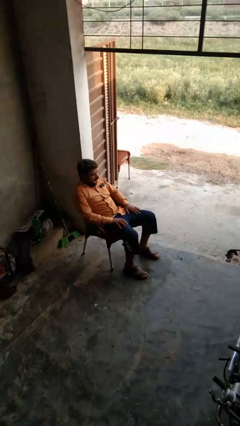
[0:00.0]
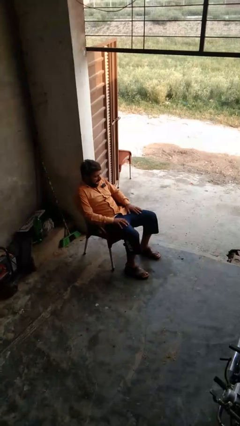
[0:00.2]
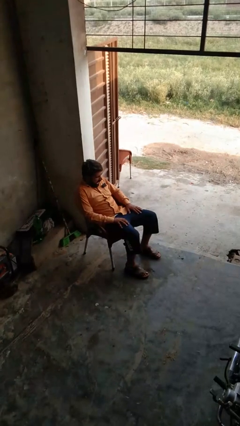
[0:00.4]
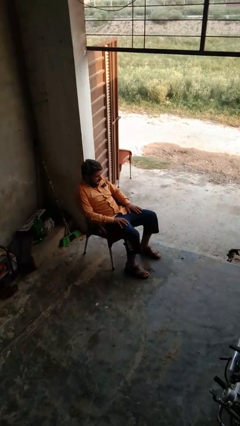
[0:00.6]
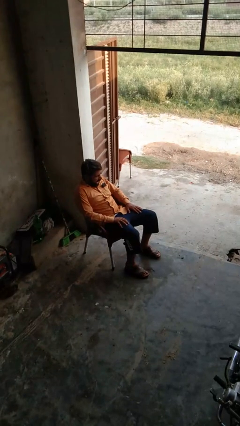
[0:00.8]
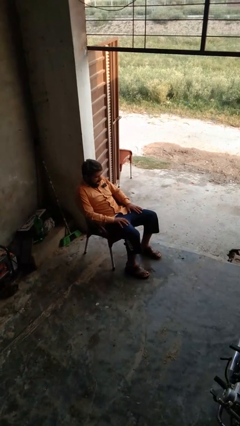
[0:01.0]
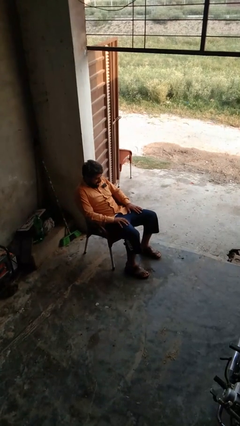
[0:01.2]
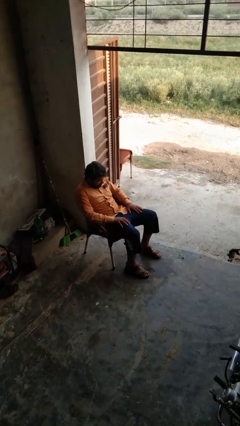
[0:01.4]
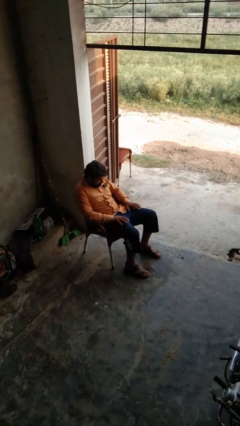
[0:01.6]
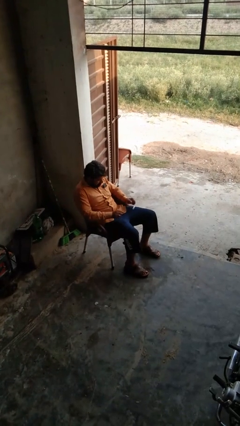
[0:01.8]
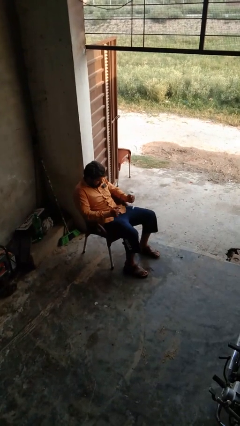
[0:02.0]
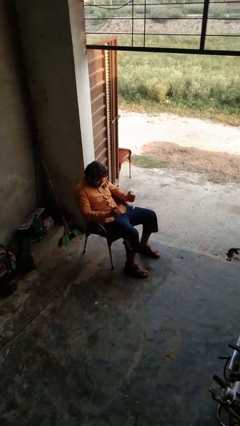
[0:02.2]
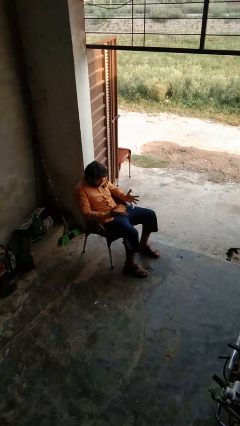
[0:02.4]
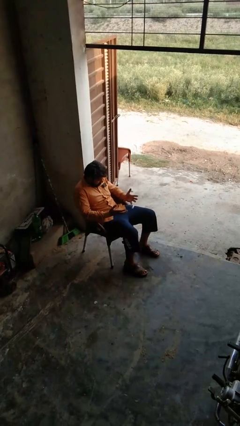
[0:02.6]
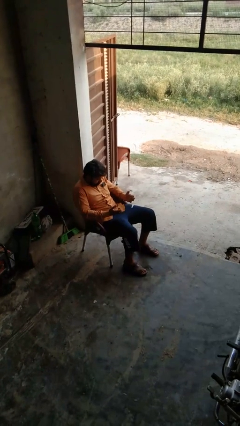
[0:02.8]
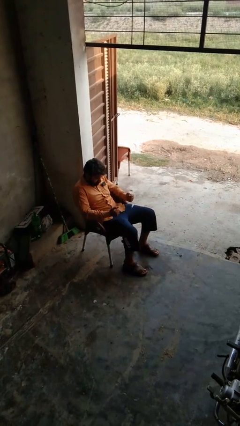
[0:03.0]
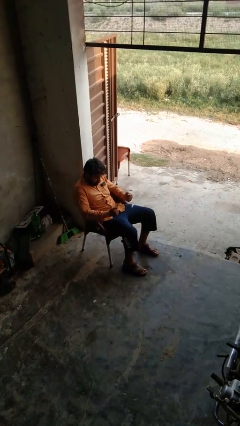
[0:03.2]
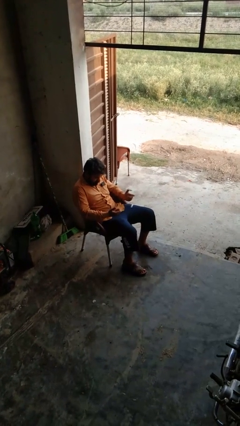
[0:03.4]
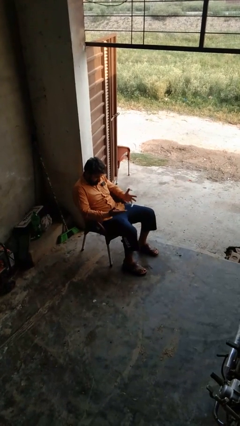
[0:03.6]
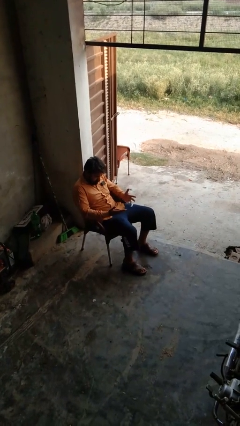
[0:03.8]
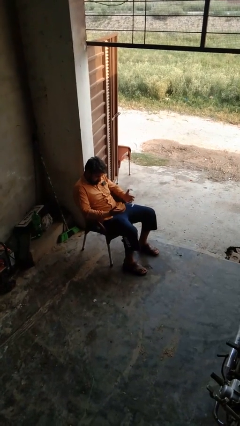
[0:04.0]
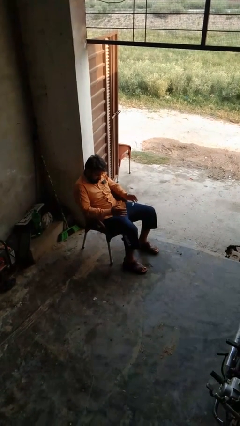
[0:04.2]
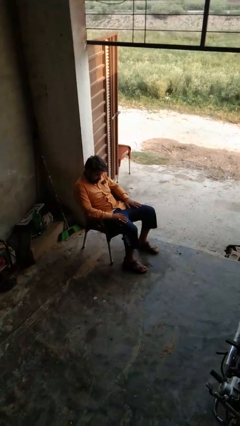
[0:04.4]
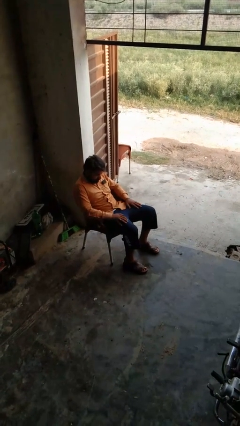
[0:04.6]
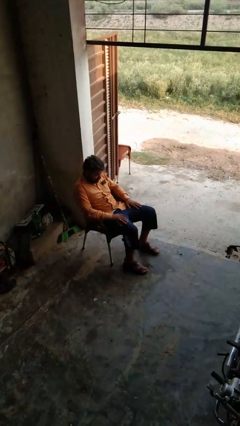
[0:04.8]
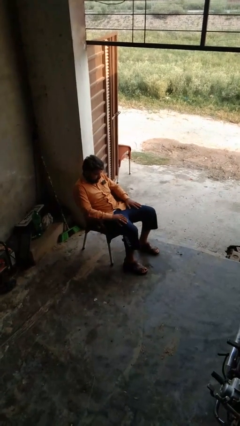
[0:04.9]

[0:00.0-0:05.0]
person looks at hands in lap

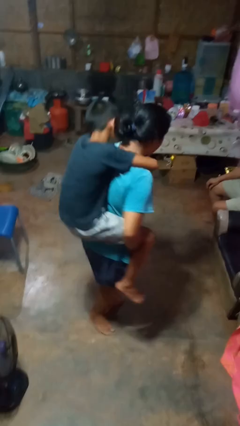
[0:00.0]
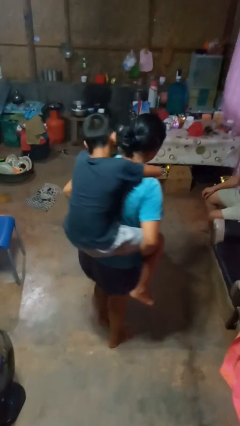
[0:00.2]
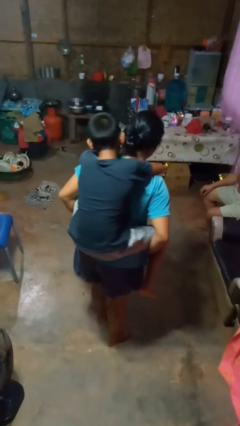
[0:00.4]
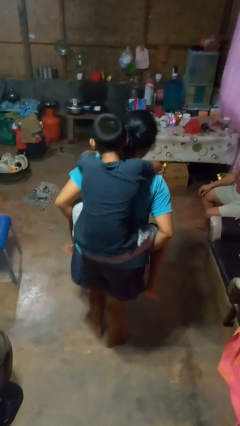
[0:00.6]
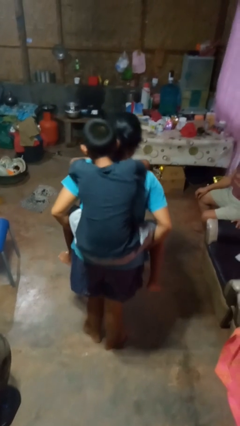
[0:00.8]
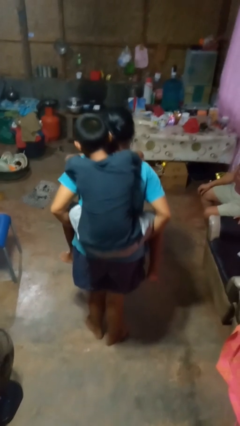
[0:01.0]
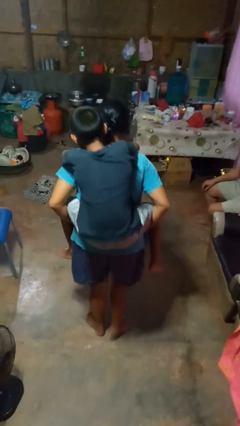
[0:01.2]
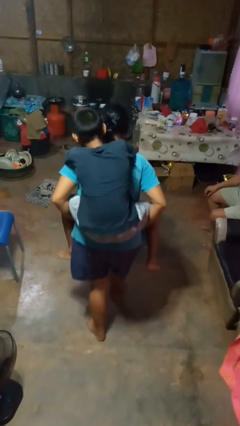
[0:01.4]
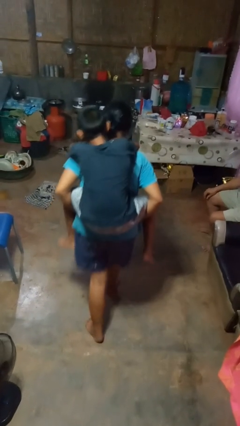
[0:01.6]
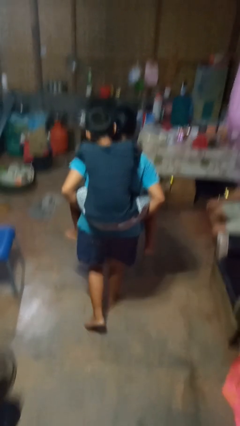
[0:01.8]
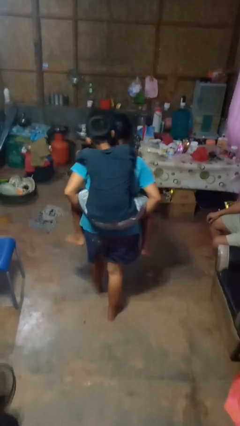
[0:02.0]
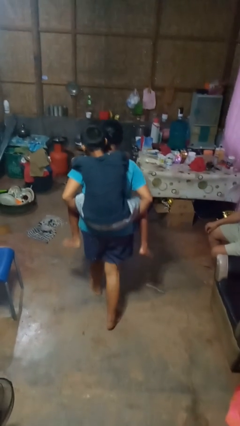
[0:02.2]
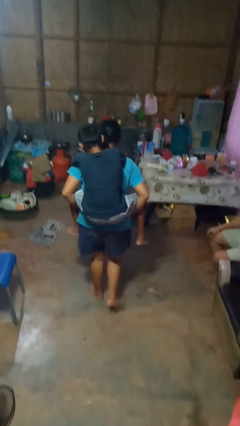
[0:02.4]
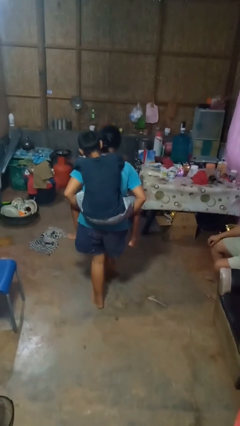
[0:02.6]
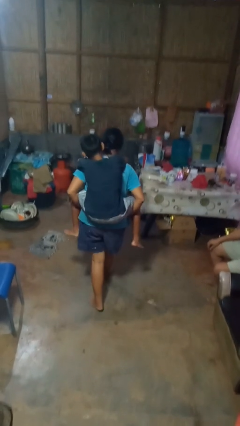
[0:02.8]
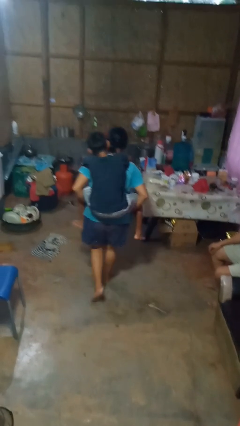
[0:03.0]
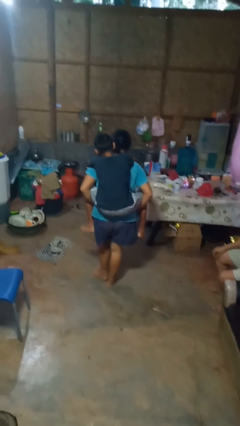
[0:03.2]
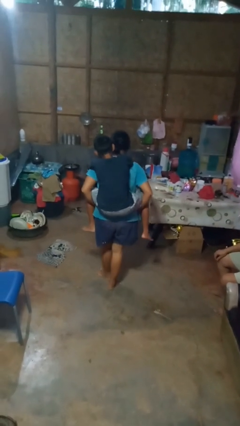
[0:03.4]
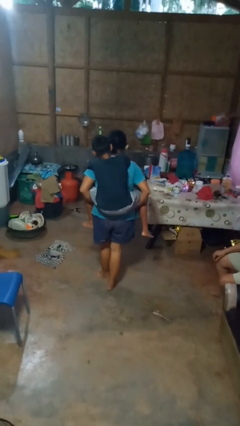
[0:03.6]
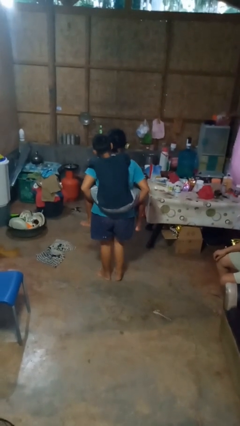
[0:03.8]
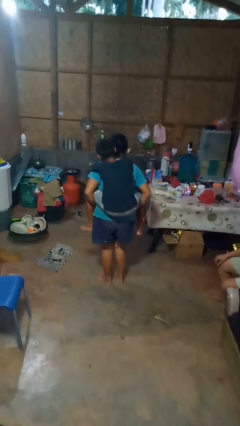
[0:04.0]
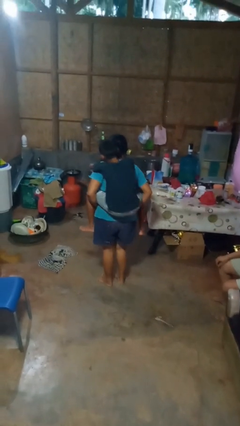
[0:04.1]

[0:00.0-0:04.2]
person carries person on back

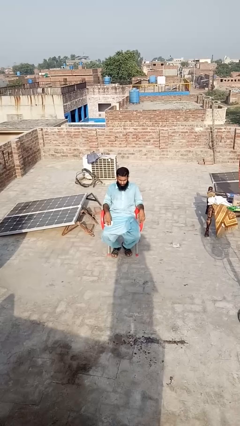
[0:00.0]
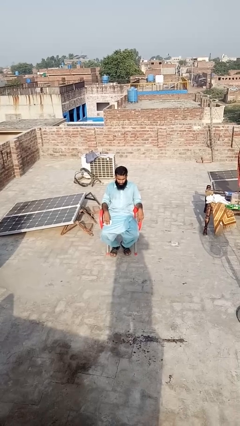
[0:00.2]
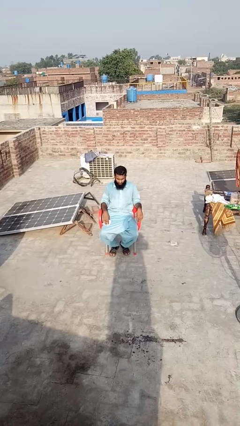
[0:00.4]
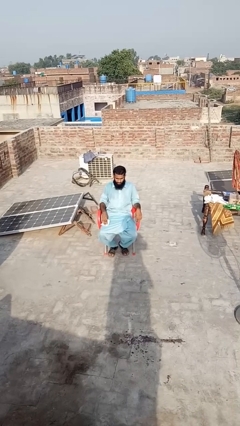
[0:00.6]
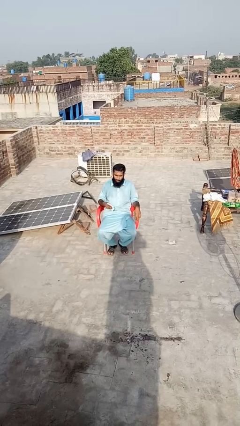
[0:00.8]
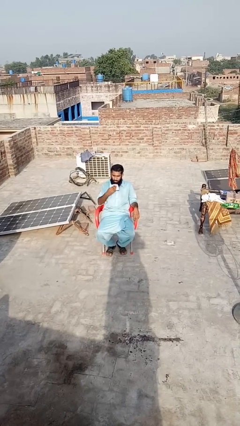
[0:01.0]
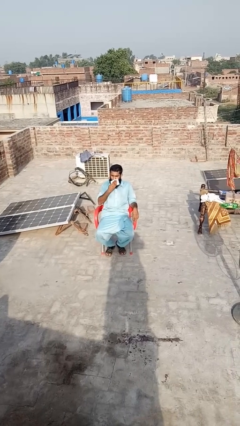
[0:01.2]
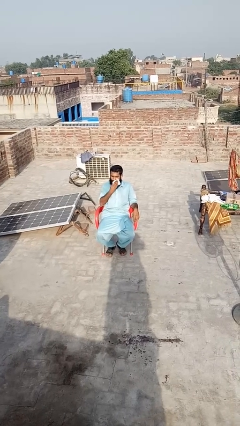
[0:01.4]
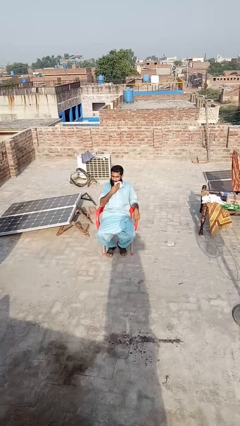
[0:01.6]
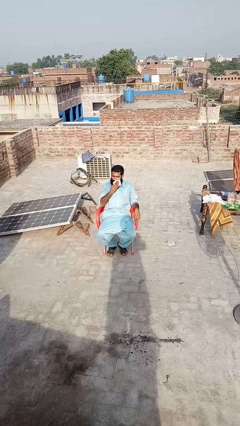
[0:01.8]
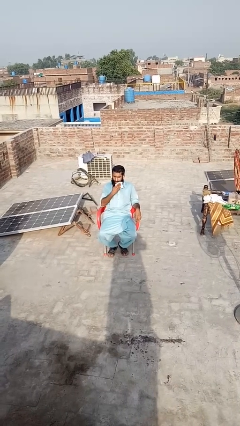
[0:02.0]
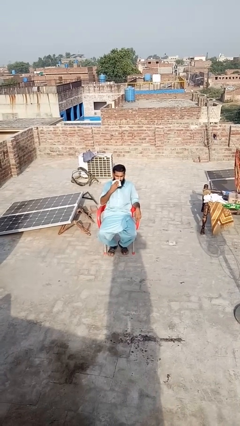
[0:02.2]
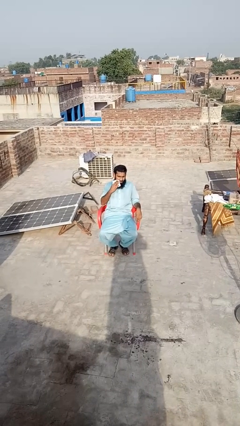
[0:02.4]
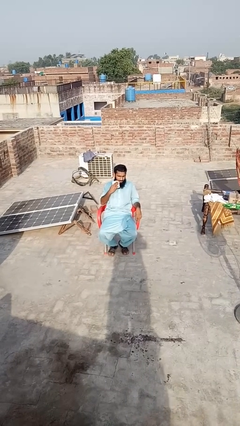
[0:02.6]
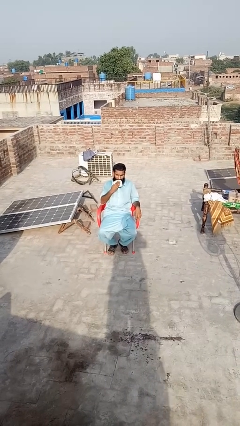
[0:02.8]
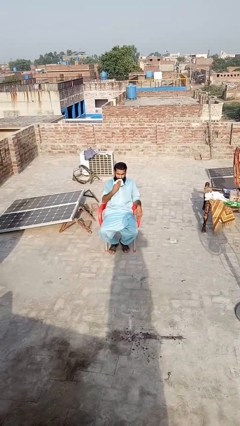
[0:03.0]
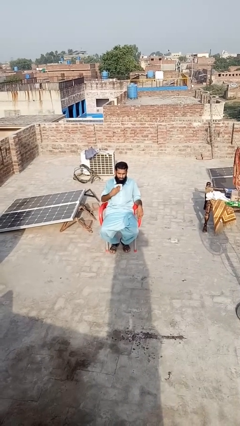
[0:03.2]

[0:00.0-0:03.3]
person wipes mouth with napkin

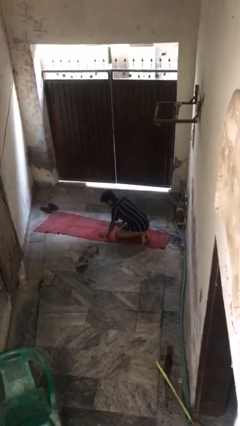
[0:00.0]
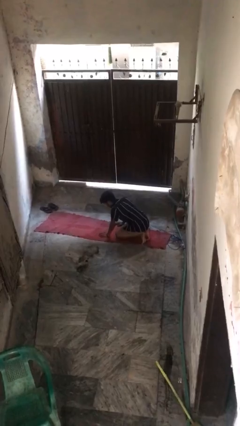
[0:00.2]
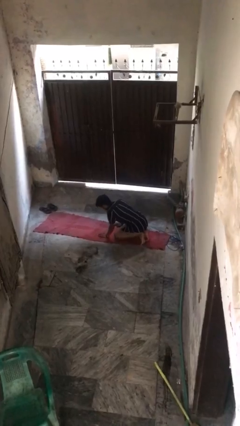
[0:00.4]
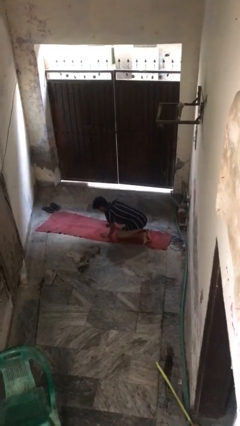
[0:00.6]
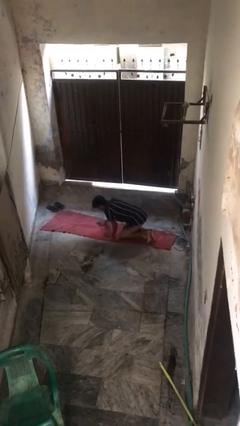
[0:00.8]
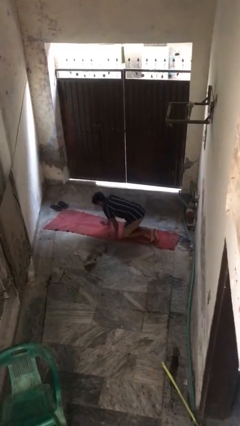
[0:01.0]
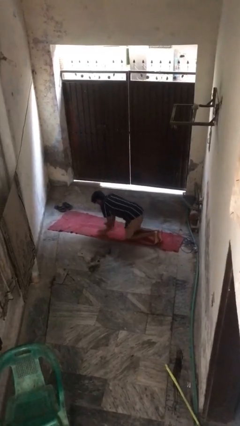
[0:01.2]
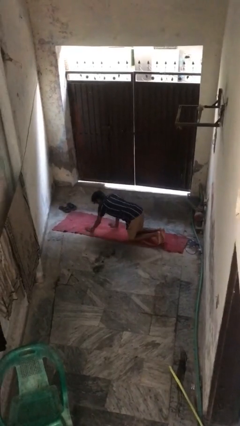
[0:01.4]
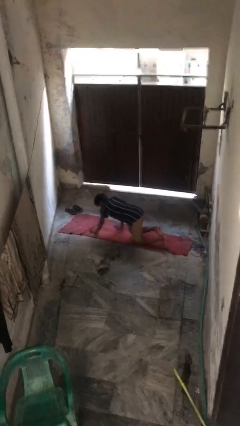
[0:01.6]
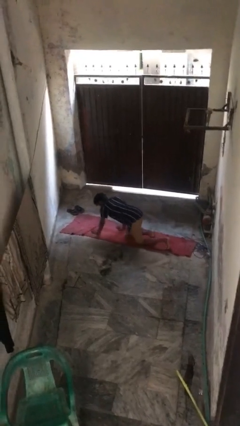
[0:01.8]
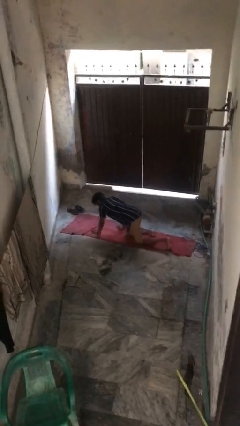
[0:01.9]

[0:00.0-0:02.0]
person crawls

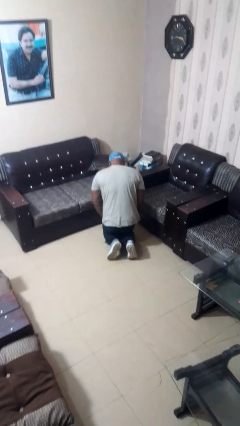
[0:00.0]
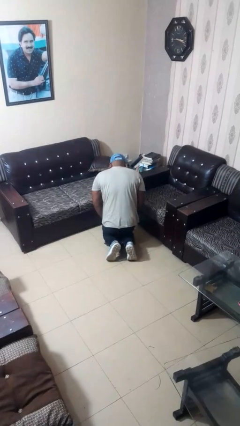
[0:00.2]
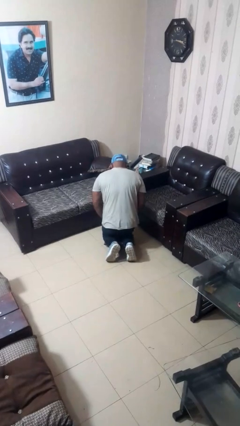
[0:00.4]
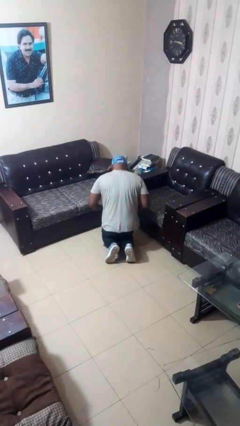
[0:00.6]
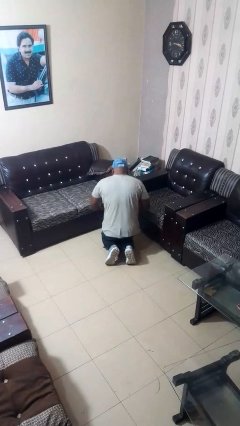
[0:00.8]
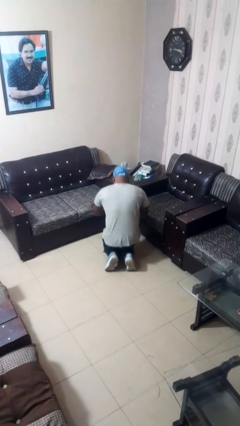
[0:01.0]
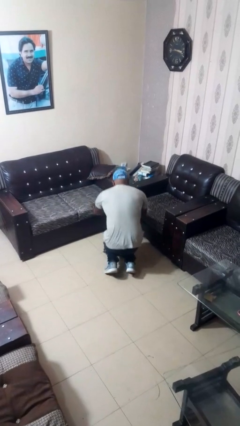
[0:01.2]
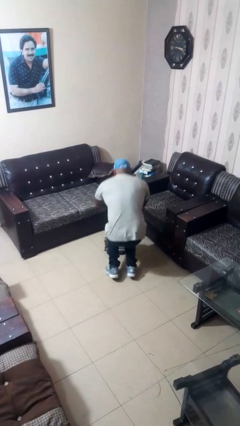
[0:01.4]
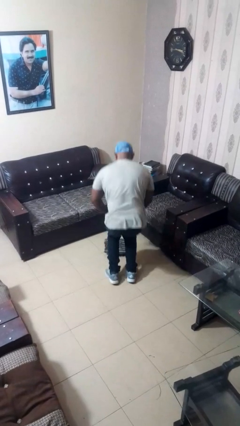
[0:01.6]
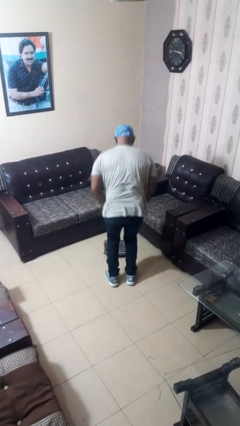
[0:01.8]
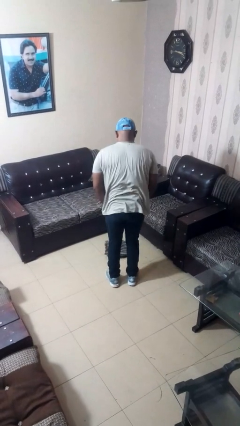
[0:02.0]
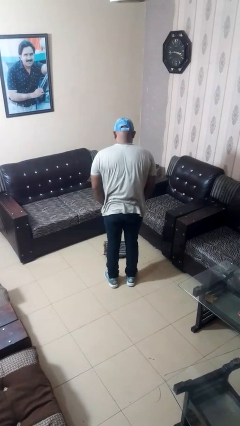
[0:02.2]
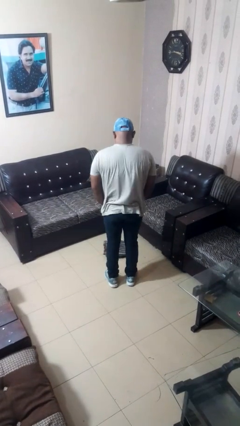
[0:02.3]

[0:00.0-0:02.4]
person stands up from floor

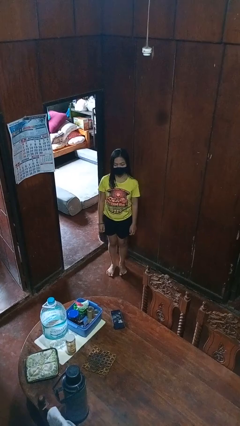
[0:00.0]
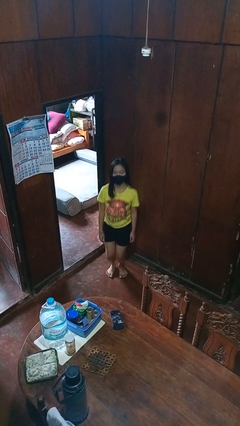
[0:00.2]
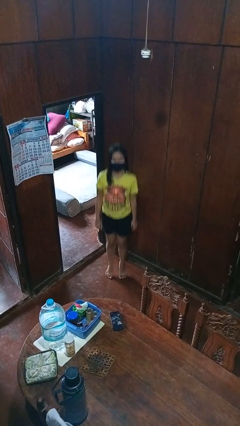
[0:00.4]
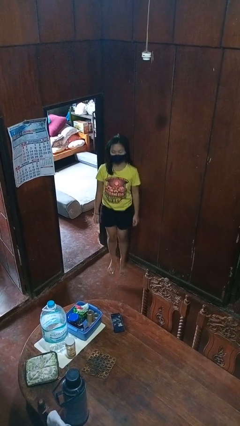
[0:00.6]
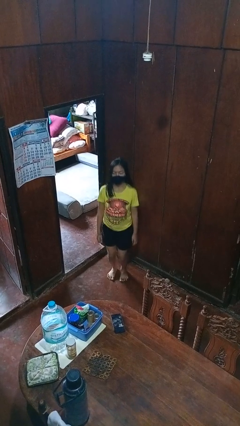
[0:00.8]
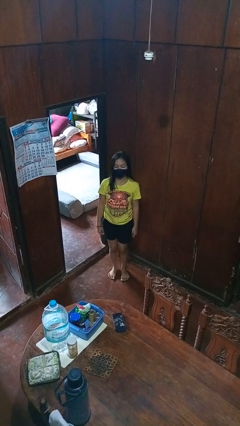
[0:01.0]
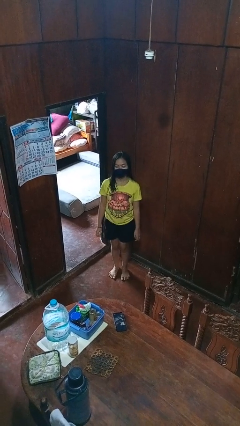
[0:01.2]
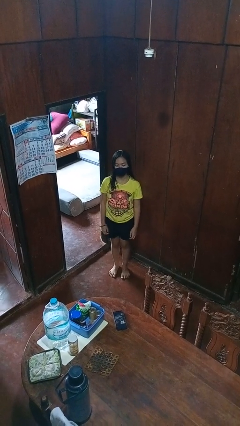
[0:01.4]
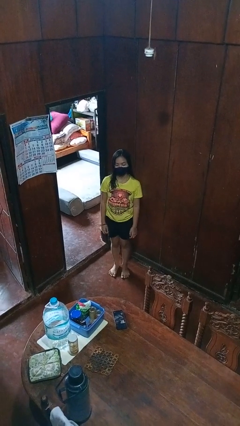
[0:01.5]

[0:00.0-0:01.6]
person jumps
